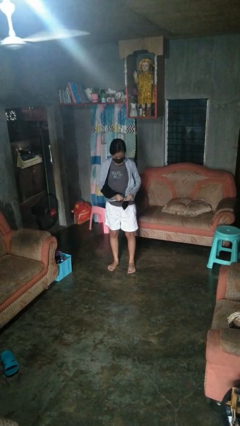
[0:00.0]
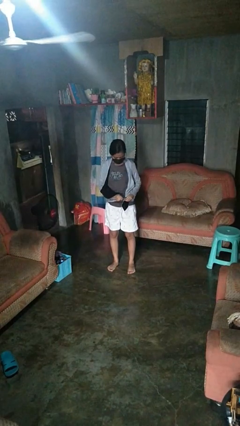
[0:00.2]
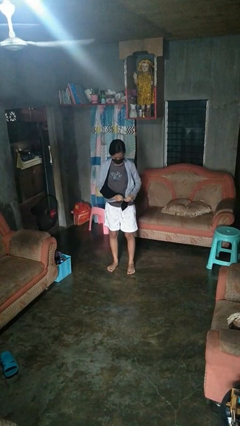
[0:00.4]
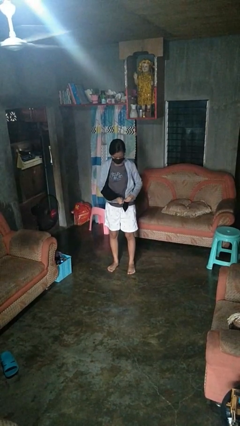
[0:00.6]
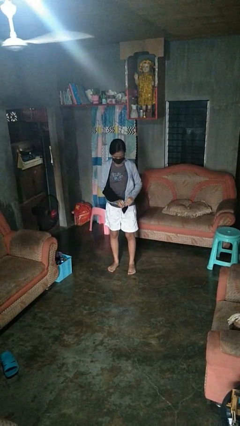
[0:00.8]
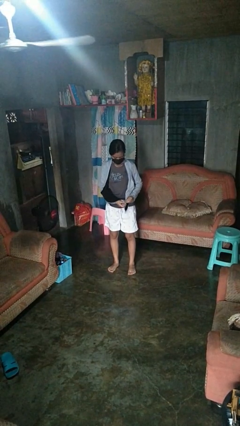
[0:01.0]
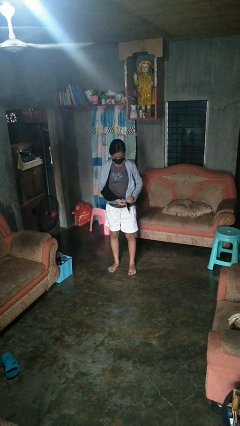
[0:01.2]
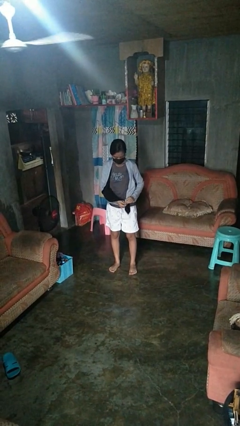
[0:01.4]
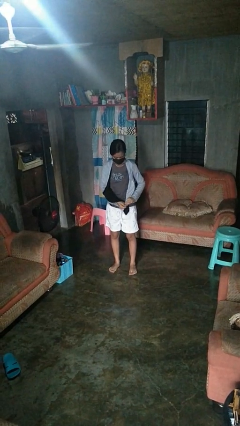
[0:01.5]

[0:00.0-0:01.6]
person zips up jacket

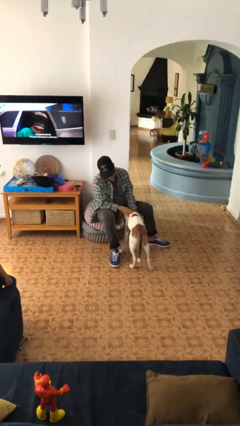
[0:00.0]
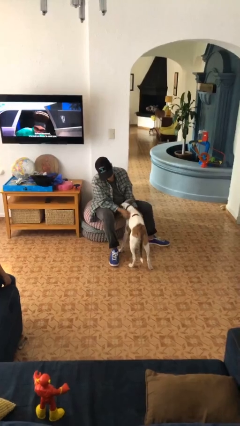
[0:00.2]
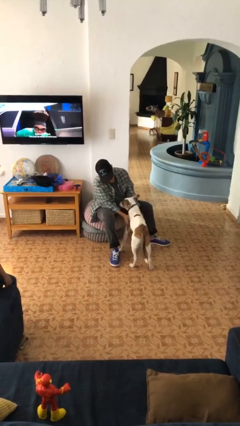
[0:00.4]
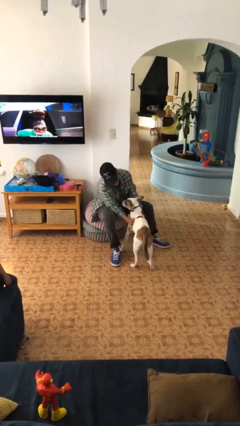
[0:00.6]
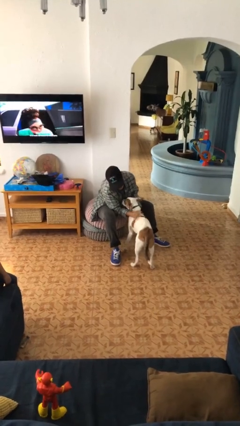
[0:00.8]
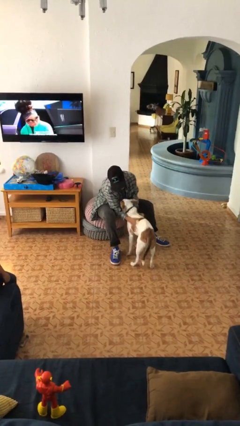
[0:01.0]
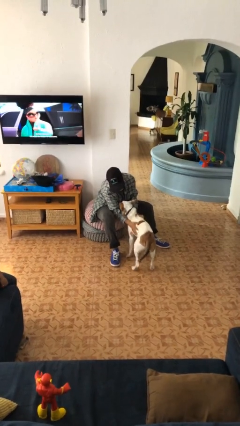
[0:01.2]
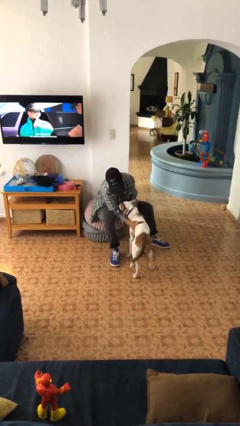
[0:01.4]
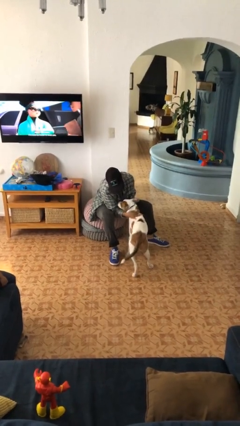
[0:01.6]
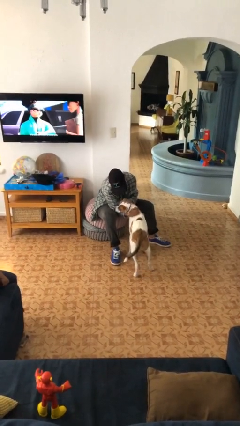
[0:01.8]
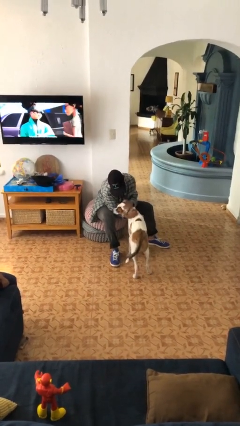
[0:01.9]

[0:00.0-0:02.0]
person pets dog

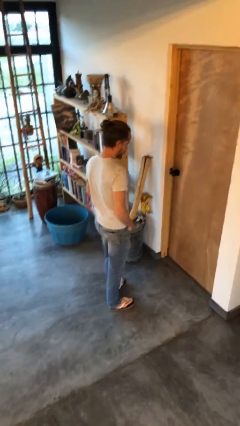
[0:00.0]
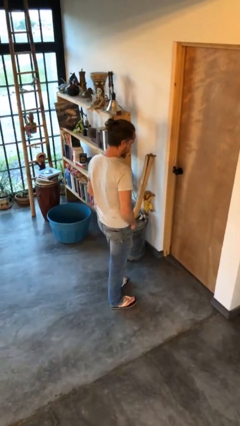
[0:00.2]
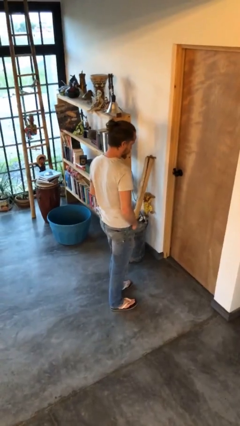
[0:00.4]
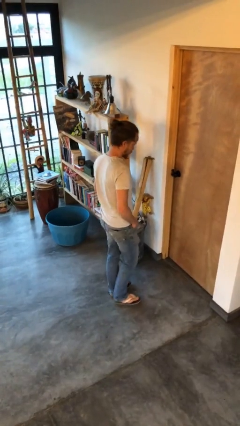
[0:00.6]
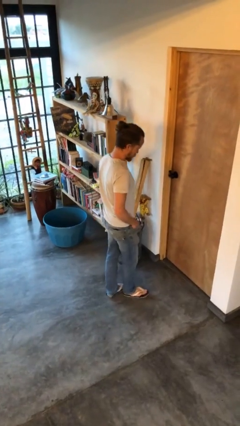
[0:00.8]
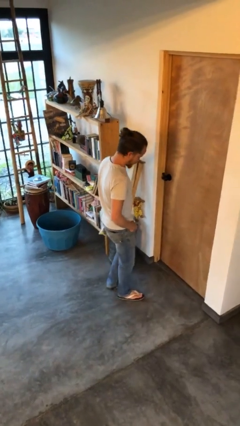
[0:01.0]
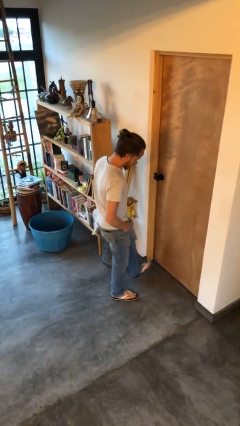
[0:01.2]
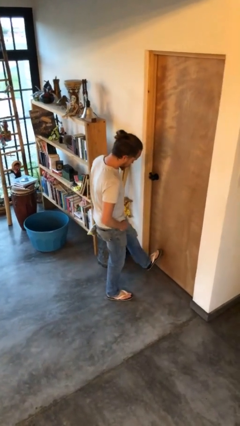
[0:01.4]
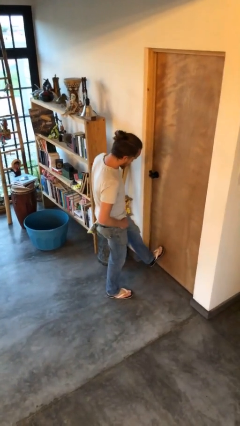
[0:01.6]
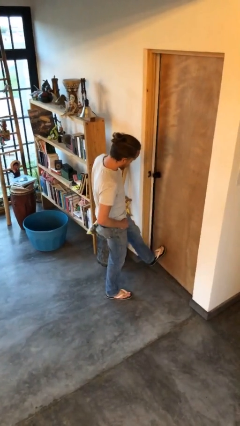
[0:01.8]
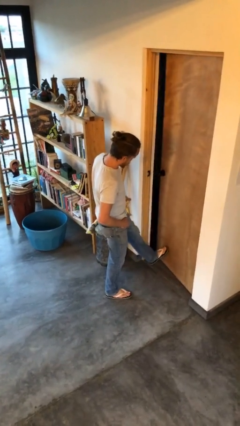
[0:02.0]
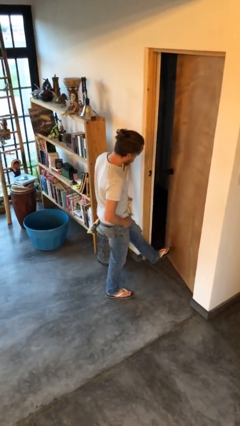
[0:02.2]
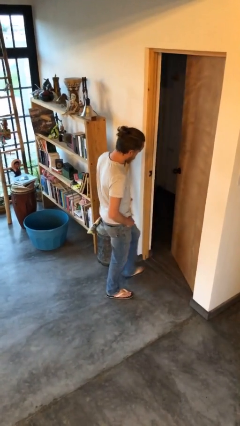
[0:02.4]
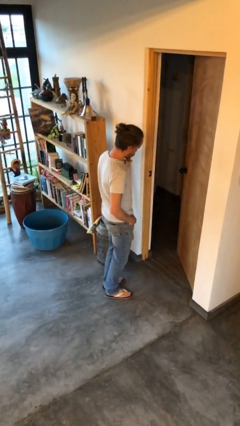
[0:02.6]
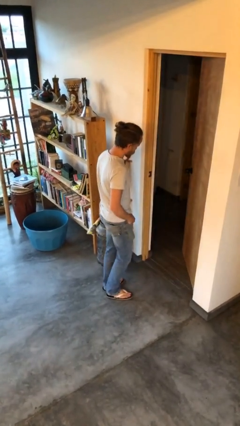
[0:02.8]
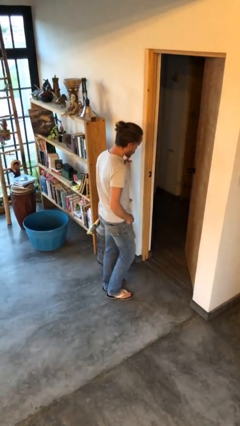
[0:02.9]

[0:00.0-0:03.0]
person opens facility door

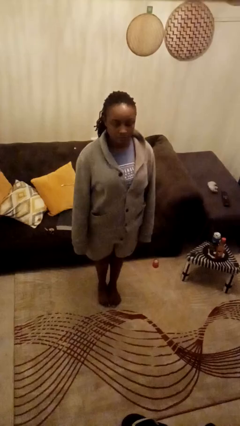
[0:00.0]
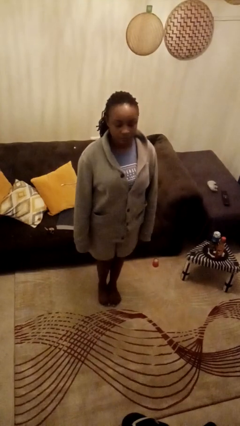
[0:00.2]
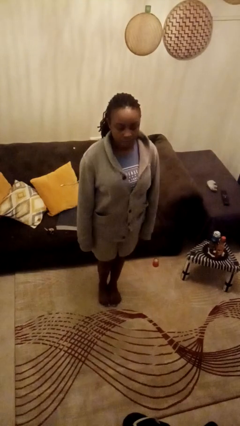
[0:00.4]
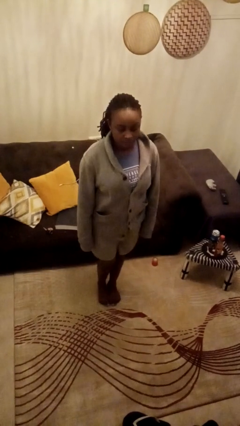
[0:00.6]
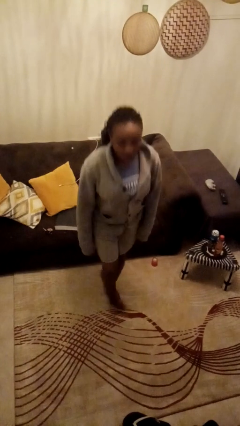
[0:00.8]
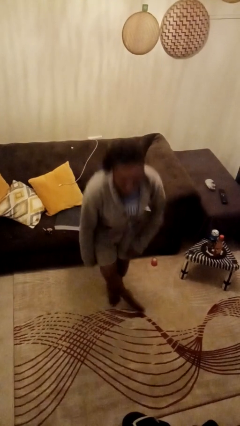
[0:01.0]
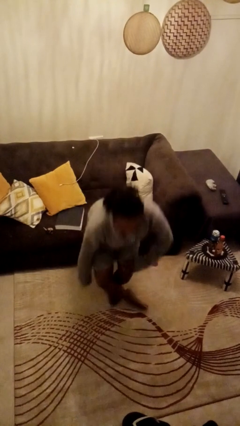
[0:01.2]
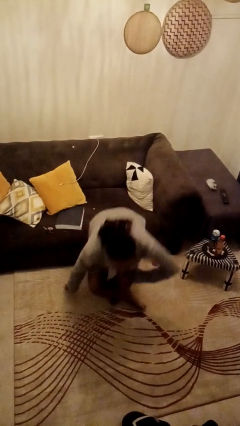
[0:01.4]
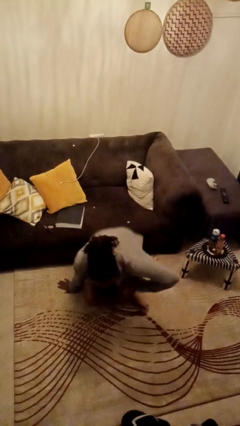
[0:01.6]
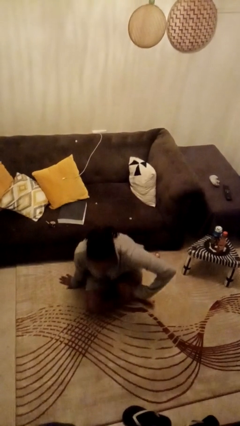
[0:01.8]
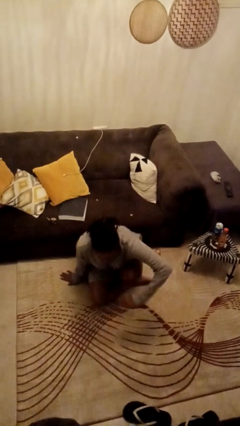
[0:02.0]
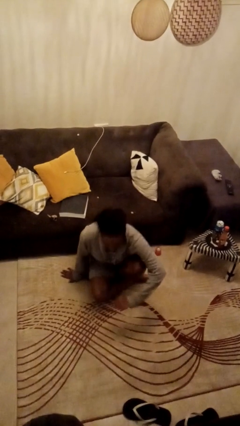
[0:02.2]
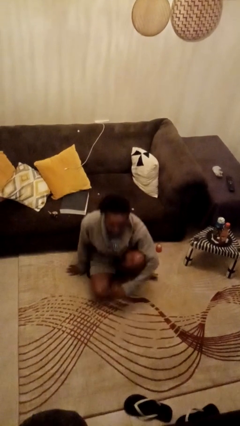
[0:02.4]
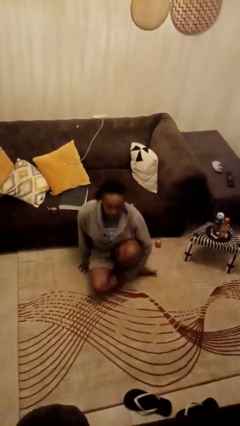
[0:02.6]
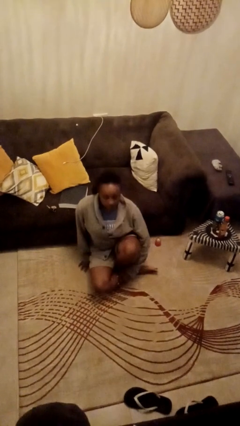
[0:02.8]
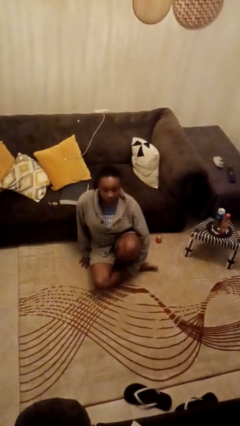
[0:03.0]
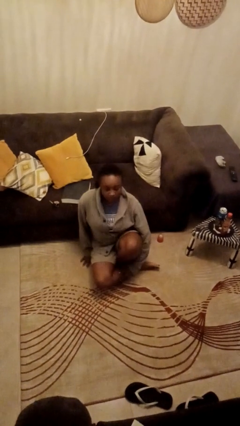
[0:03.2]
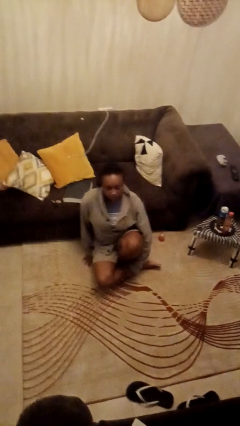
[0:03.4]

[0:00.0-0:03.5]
person sits crisscross

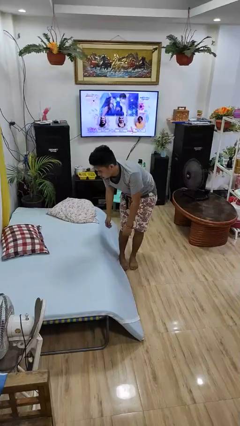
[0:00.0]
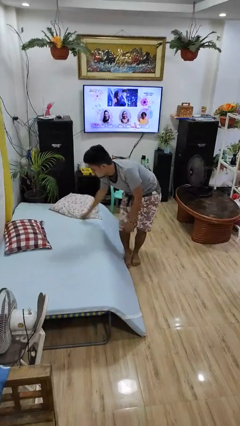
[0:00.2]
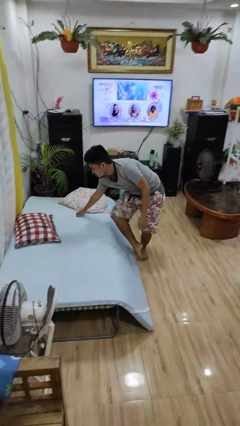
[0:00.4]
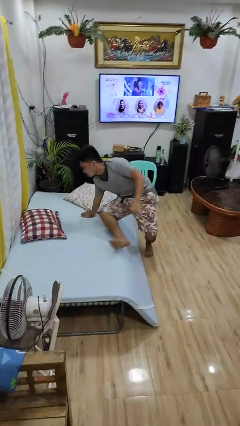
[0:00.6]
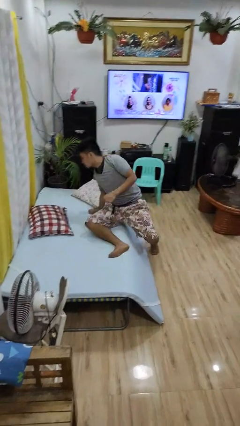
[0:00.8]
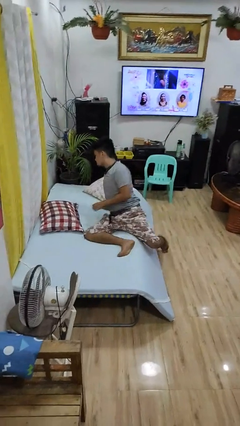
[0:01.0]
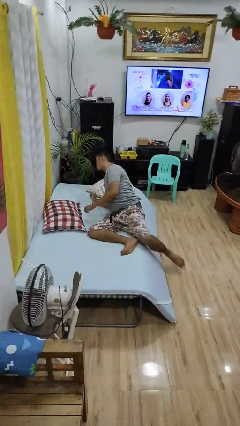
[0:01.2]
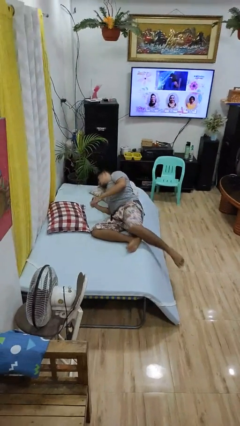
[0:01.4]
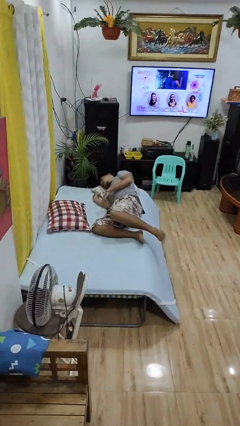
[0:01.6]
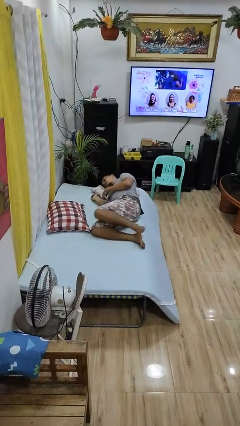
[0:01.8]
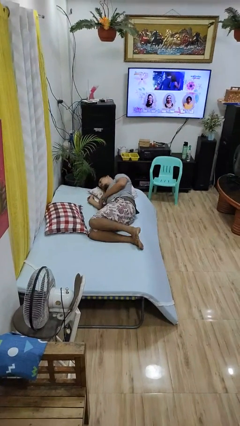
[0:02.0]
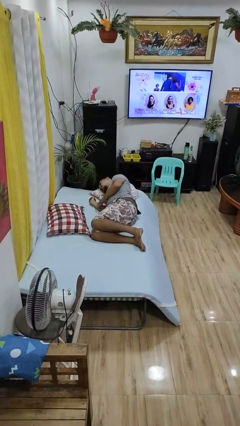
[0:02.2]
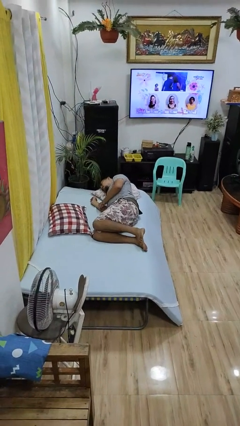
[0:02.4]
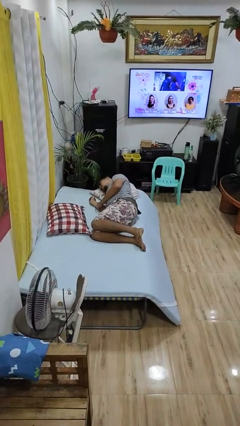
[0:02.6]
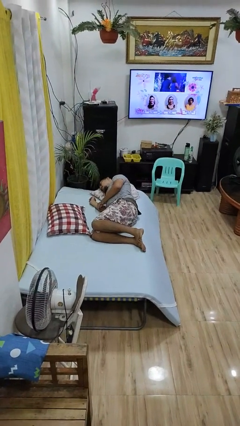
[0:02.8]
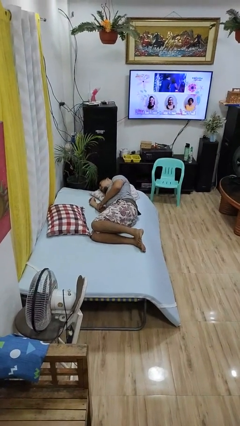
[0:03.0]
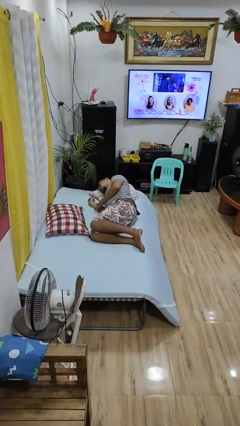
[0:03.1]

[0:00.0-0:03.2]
person lies down on bed

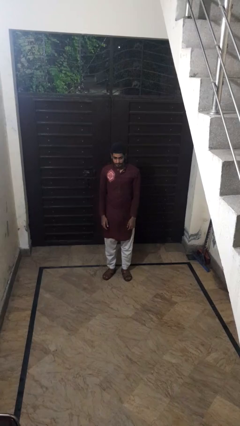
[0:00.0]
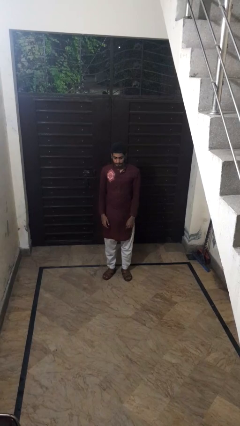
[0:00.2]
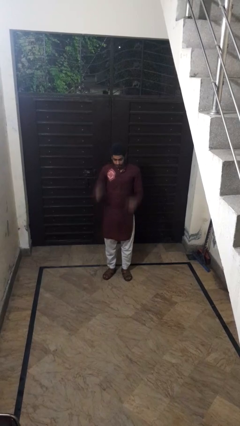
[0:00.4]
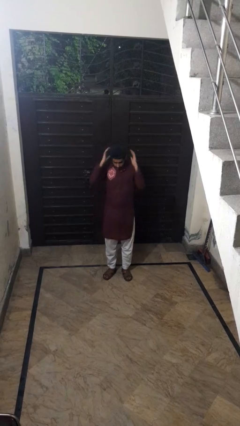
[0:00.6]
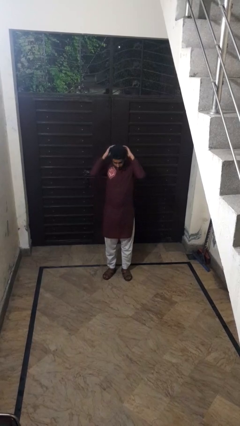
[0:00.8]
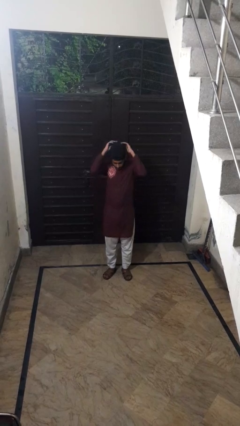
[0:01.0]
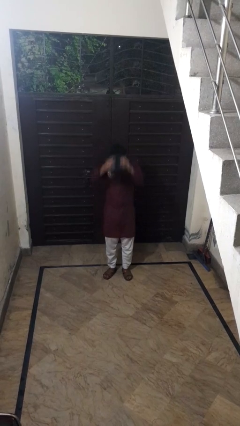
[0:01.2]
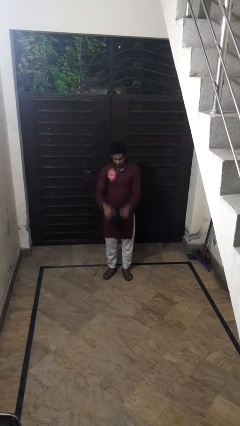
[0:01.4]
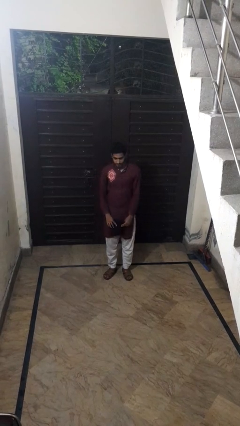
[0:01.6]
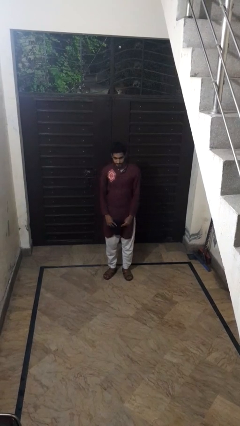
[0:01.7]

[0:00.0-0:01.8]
person takes off hat

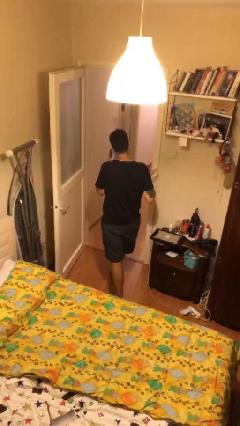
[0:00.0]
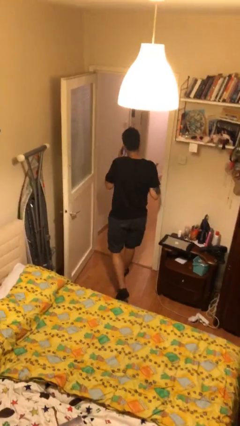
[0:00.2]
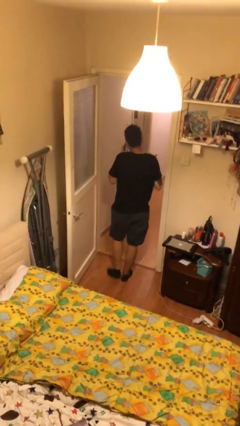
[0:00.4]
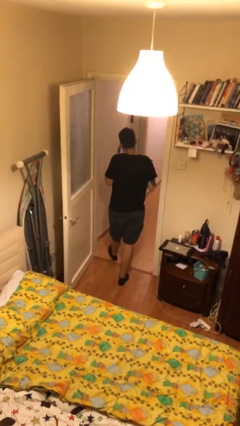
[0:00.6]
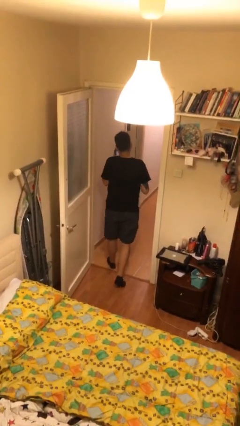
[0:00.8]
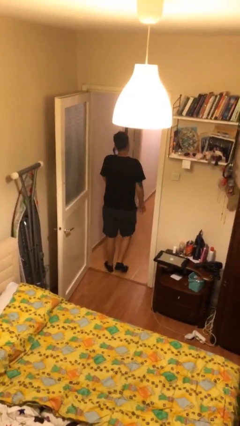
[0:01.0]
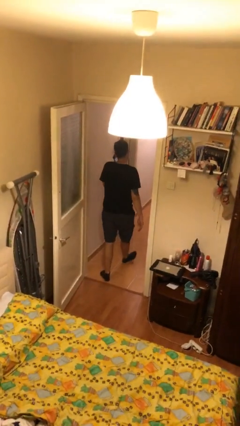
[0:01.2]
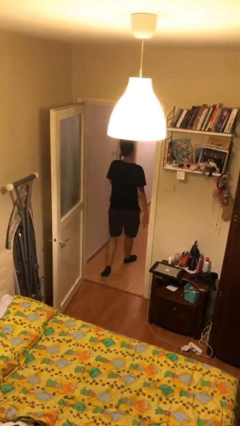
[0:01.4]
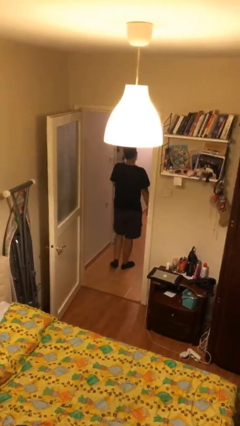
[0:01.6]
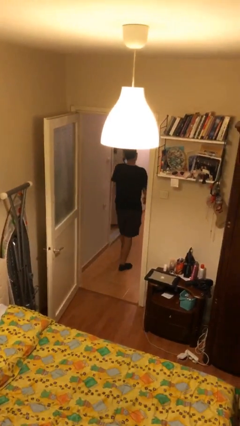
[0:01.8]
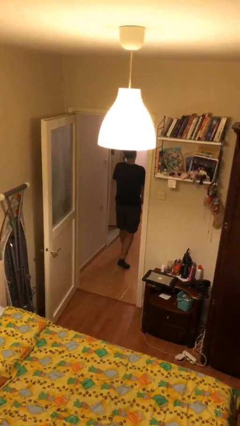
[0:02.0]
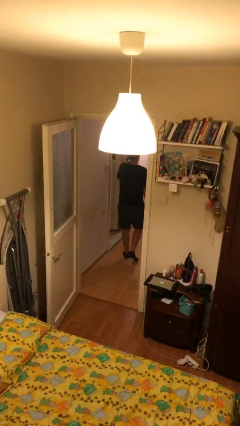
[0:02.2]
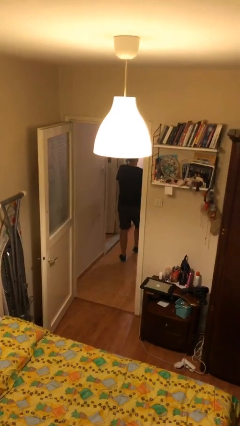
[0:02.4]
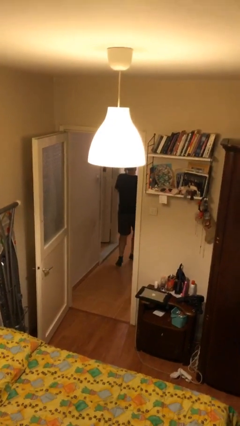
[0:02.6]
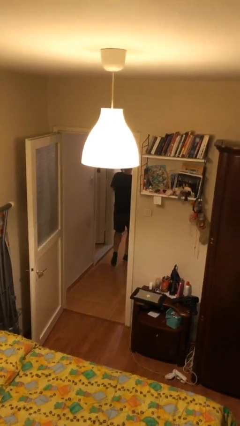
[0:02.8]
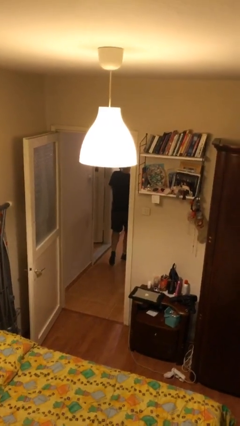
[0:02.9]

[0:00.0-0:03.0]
person exits scene through structure
